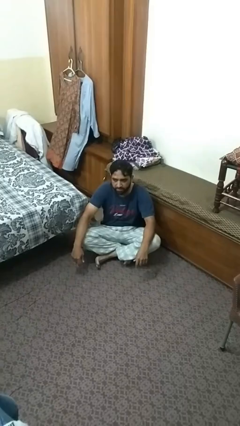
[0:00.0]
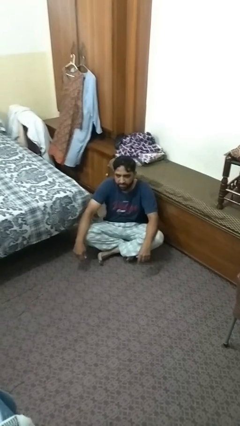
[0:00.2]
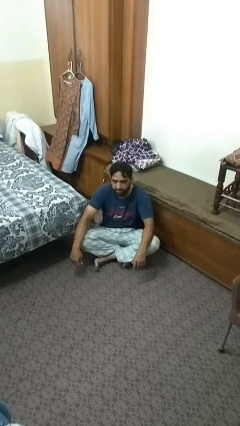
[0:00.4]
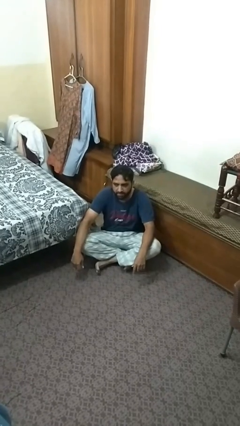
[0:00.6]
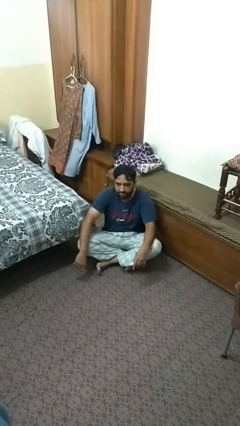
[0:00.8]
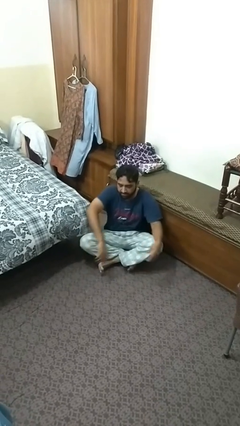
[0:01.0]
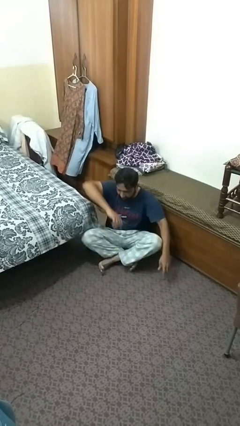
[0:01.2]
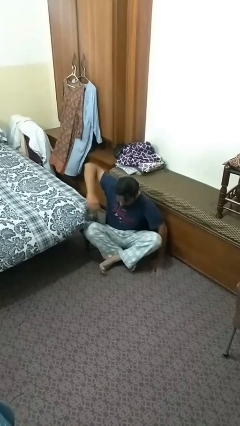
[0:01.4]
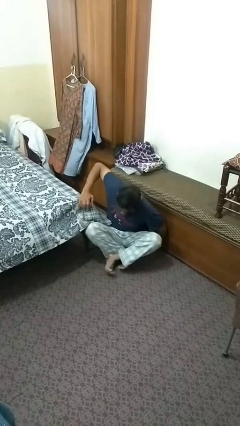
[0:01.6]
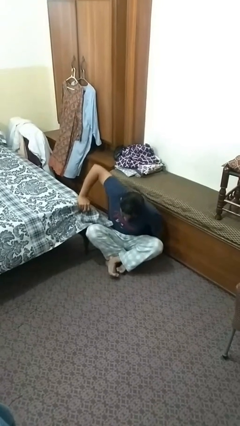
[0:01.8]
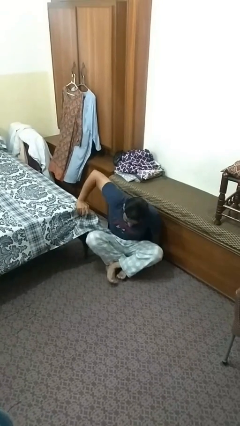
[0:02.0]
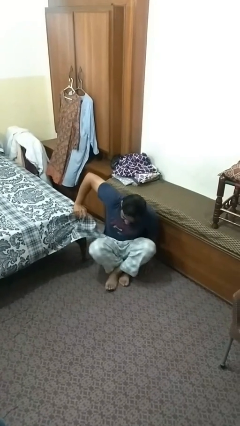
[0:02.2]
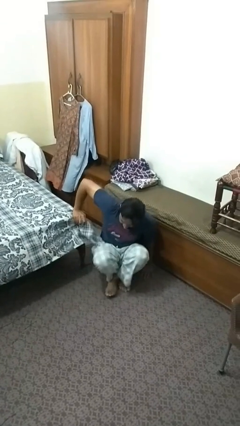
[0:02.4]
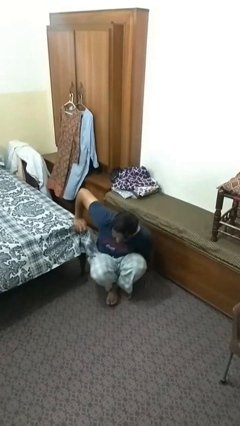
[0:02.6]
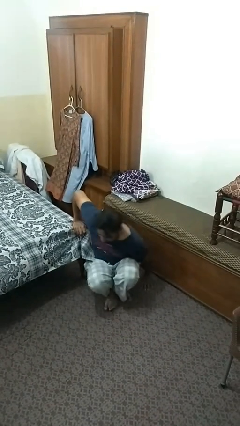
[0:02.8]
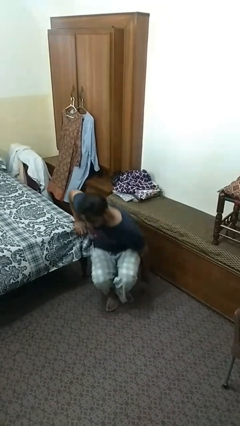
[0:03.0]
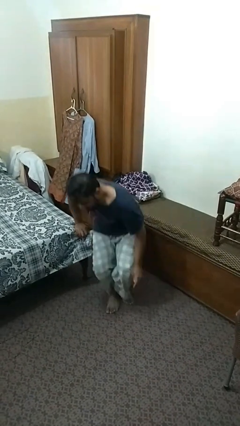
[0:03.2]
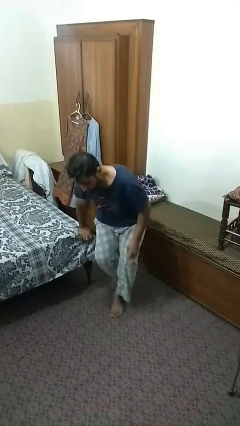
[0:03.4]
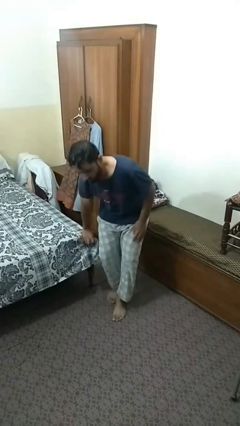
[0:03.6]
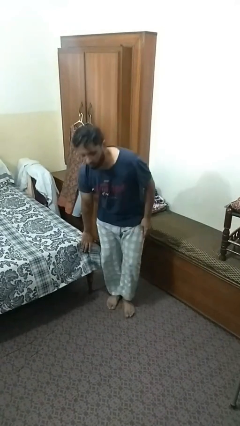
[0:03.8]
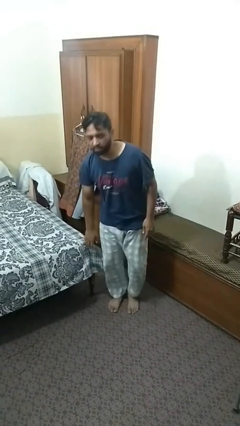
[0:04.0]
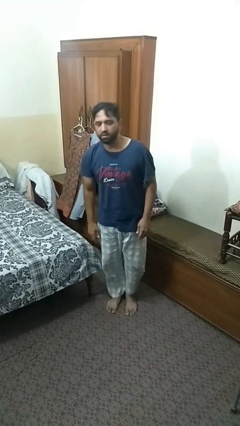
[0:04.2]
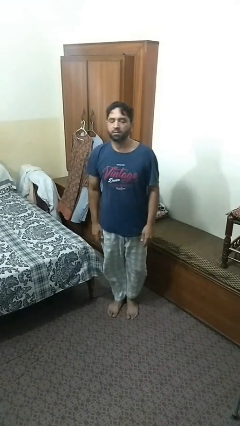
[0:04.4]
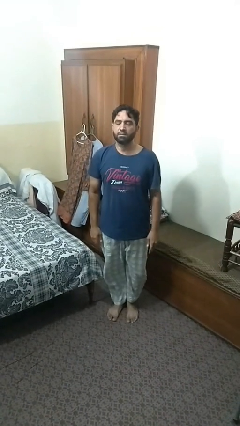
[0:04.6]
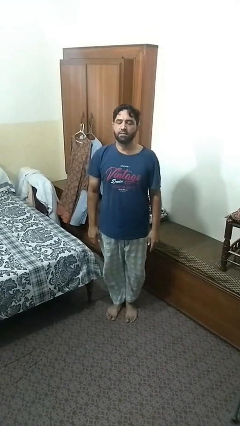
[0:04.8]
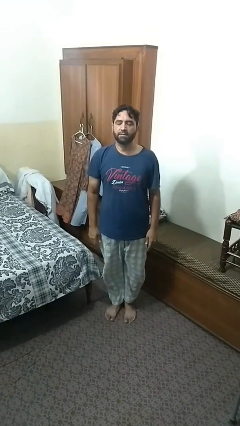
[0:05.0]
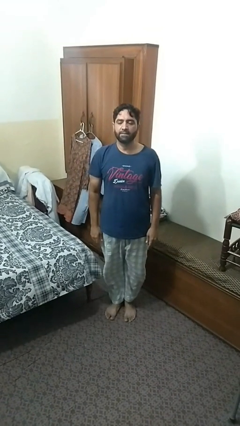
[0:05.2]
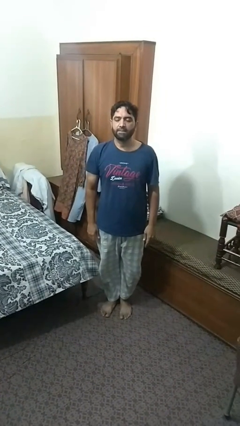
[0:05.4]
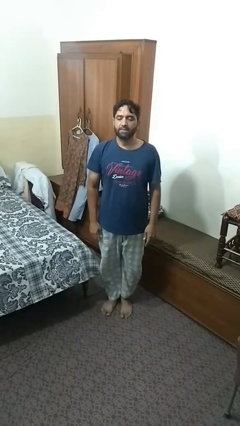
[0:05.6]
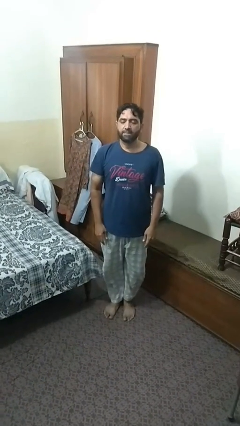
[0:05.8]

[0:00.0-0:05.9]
person stands up from floor

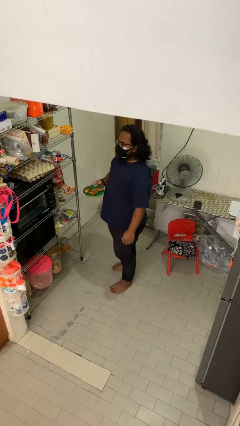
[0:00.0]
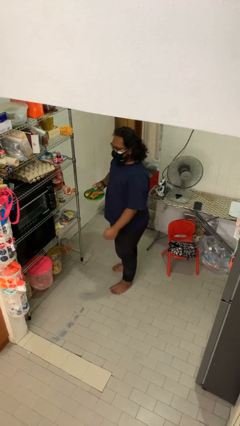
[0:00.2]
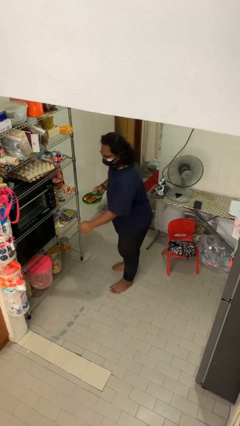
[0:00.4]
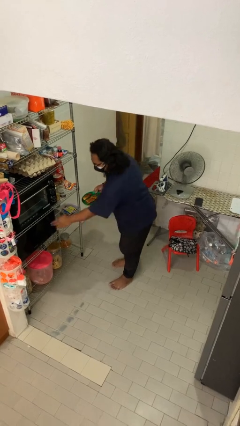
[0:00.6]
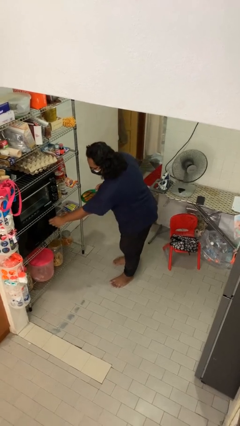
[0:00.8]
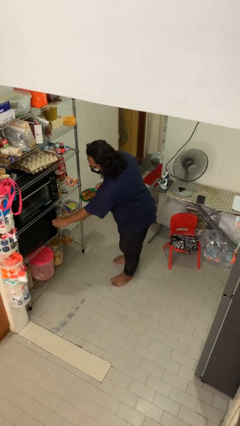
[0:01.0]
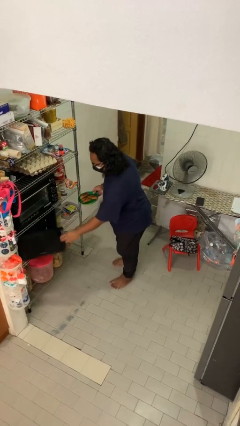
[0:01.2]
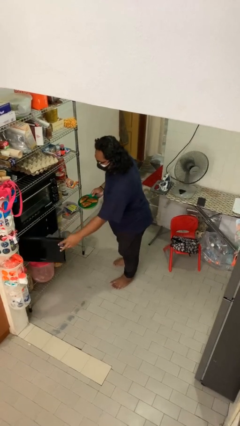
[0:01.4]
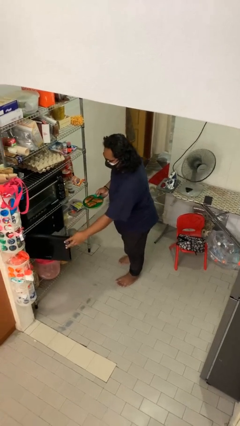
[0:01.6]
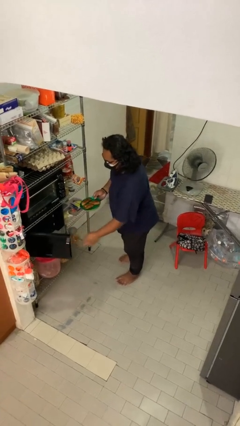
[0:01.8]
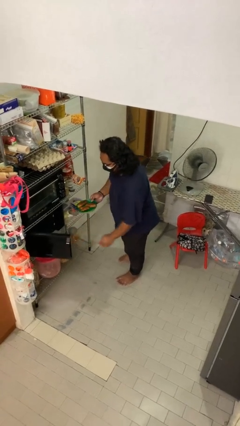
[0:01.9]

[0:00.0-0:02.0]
person opens microwave

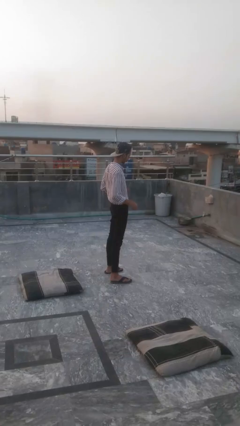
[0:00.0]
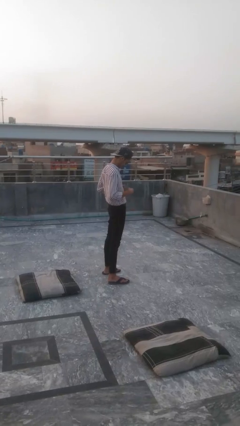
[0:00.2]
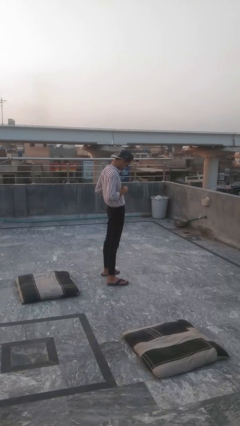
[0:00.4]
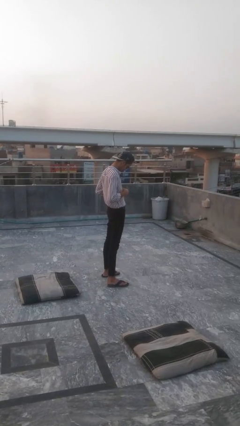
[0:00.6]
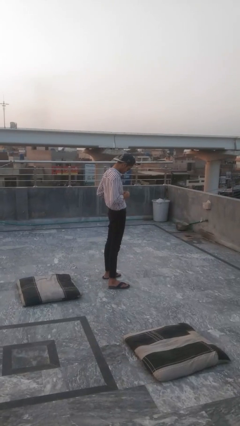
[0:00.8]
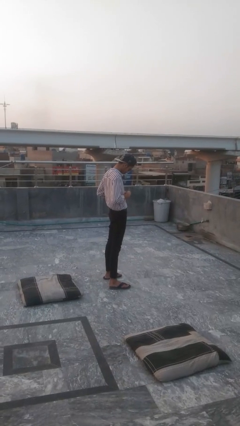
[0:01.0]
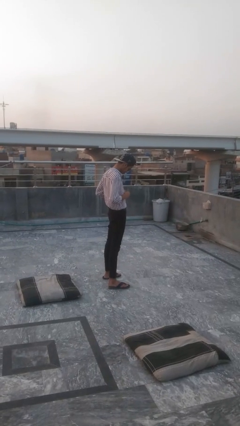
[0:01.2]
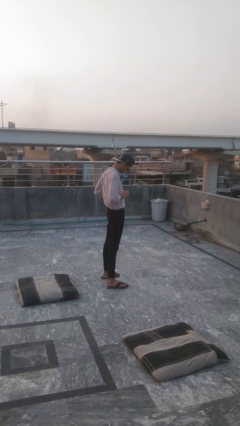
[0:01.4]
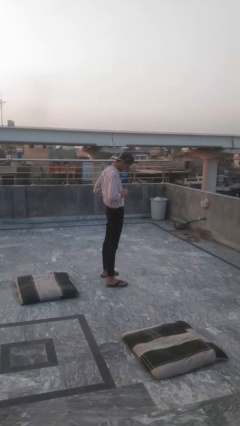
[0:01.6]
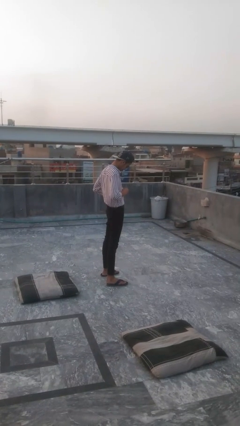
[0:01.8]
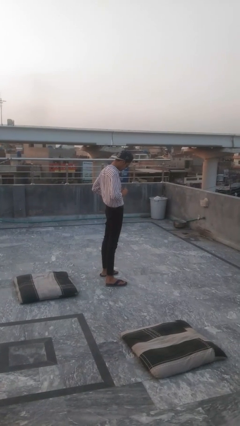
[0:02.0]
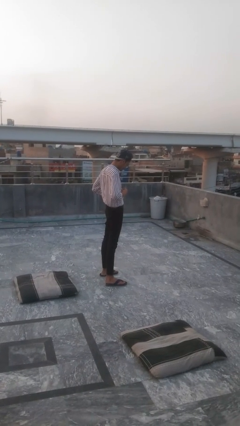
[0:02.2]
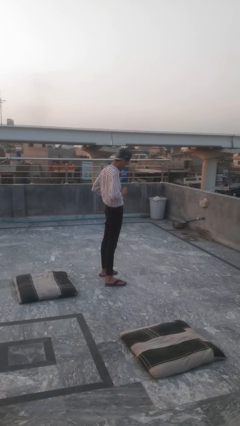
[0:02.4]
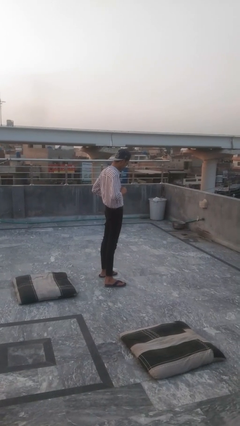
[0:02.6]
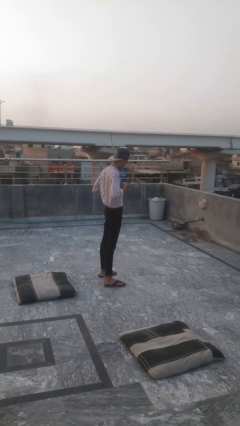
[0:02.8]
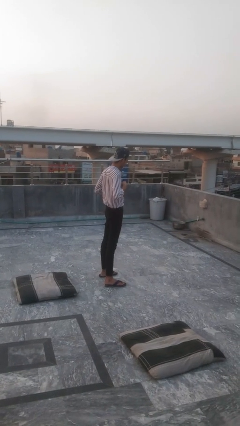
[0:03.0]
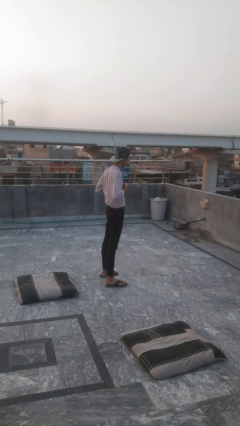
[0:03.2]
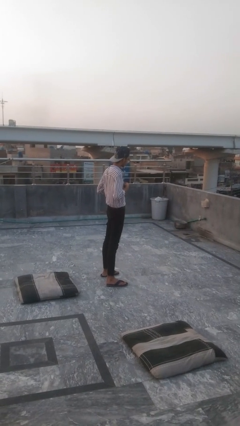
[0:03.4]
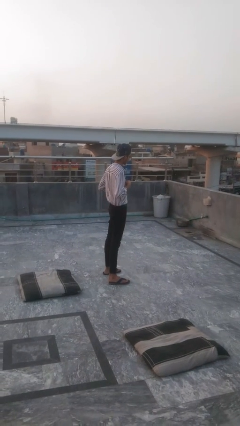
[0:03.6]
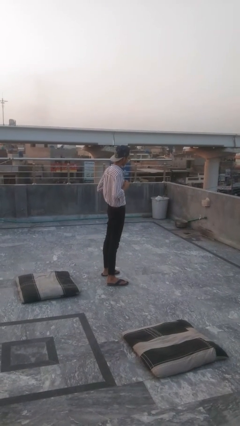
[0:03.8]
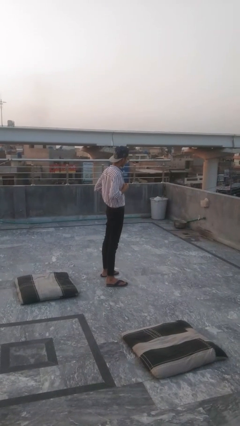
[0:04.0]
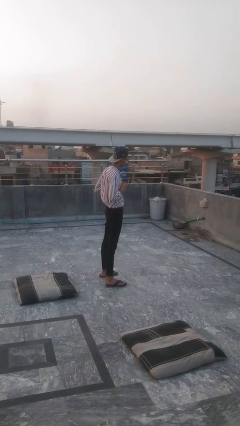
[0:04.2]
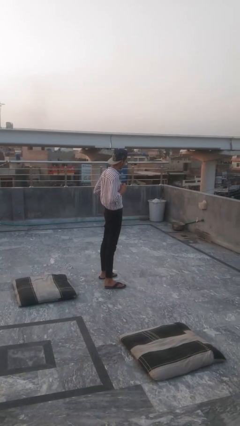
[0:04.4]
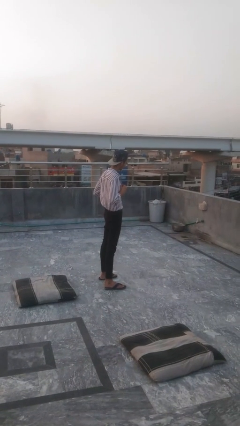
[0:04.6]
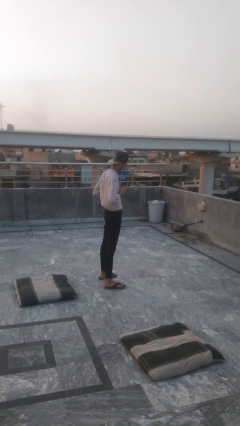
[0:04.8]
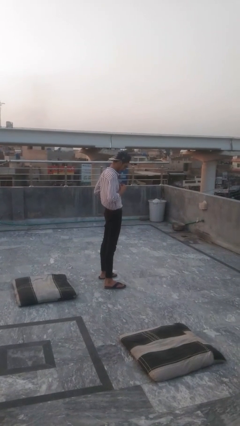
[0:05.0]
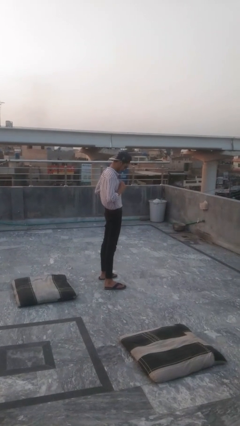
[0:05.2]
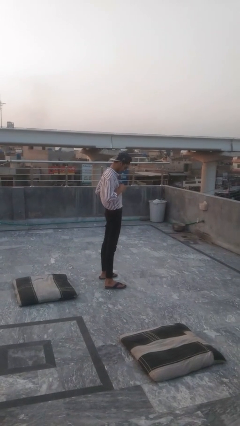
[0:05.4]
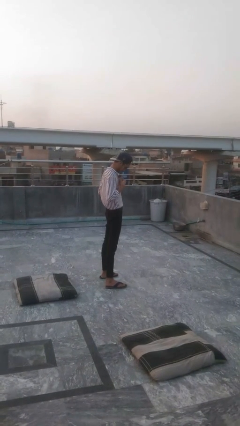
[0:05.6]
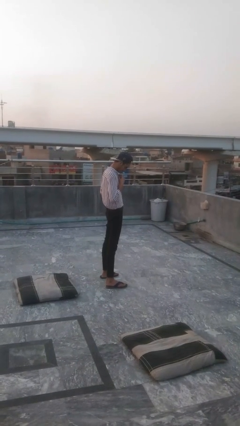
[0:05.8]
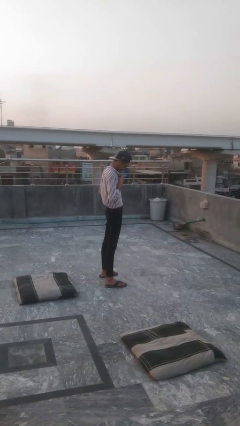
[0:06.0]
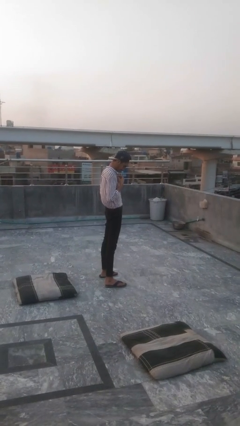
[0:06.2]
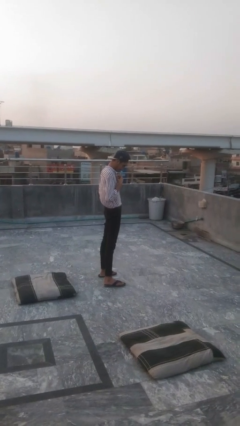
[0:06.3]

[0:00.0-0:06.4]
person unbuttons shirt

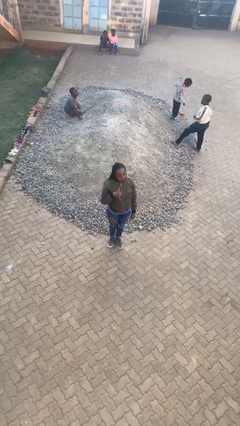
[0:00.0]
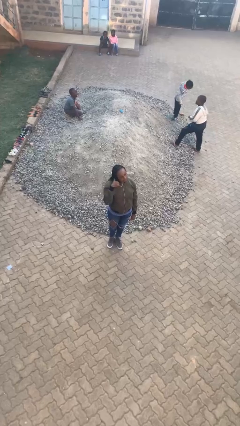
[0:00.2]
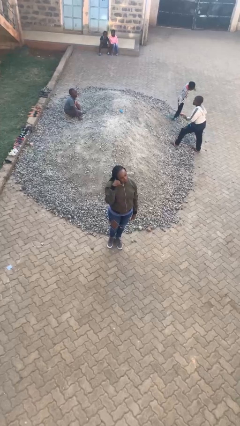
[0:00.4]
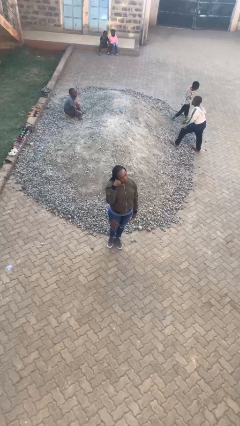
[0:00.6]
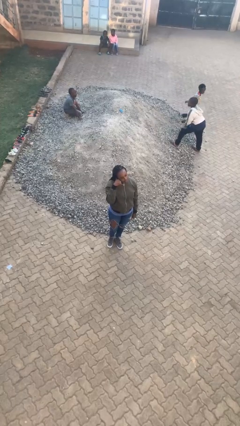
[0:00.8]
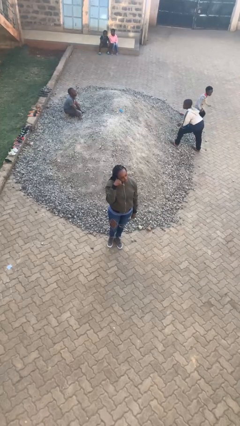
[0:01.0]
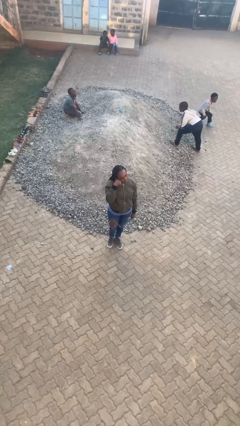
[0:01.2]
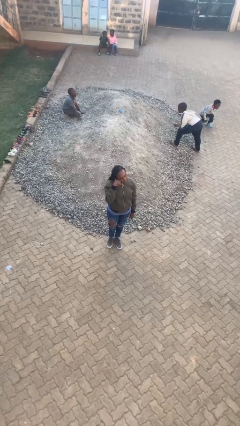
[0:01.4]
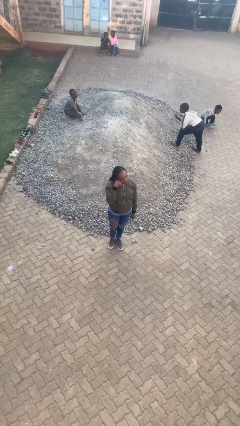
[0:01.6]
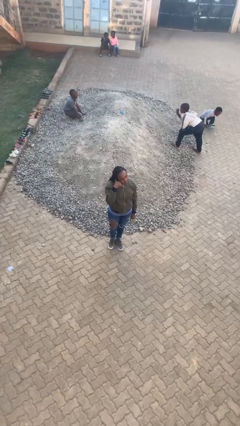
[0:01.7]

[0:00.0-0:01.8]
person gestures call me

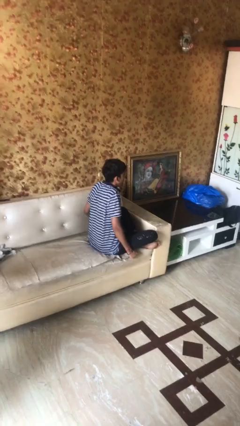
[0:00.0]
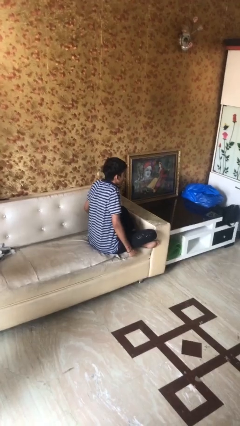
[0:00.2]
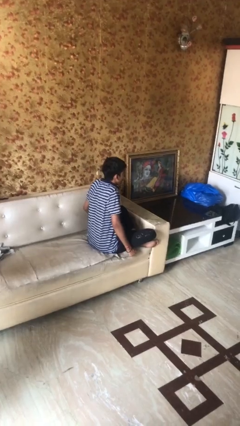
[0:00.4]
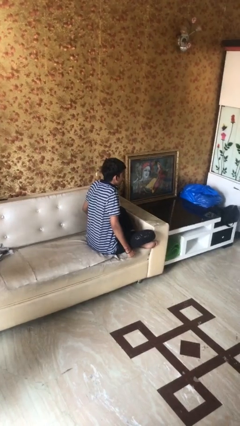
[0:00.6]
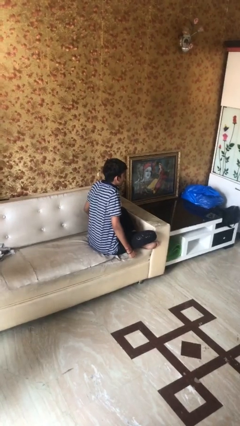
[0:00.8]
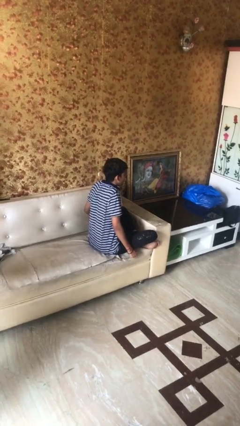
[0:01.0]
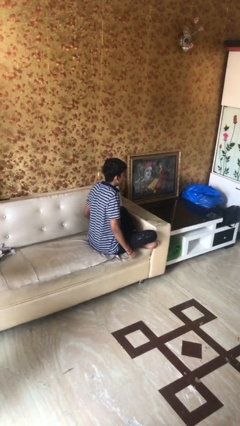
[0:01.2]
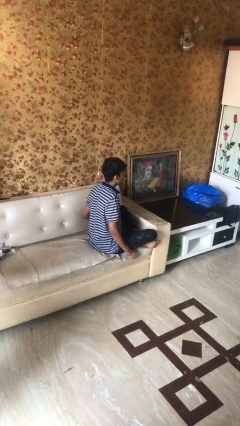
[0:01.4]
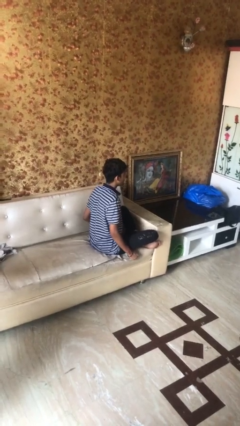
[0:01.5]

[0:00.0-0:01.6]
person shrugs

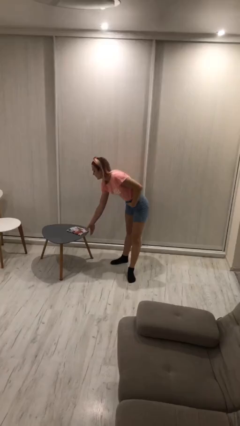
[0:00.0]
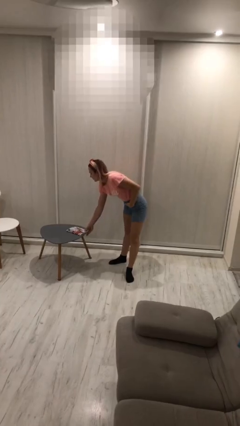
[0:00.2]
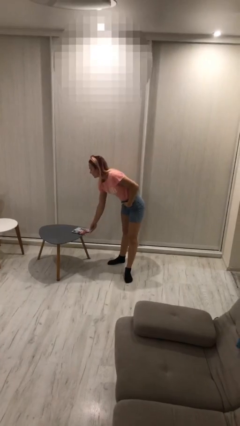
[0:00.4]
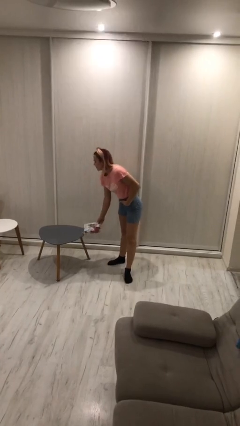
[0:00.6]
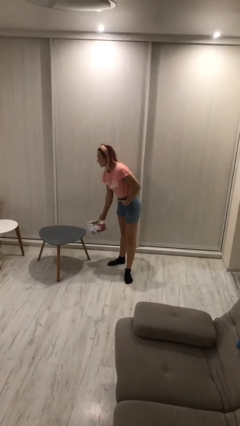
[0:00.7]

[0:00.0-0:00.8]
person picks up object from table
